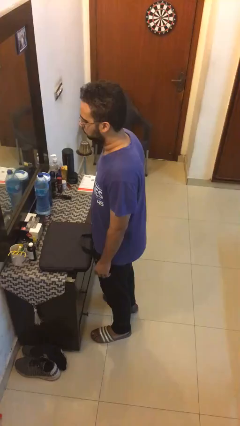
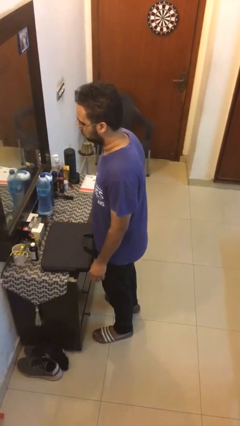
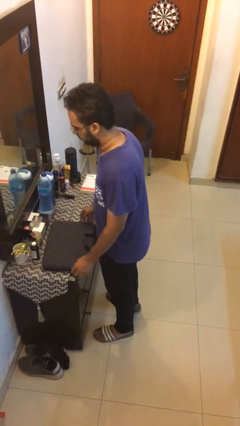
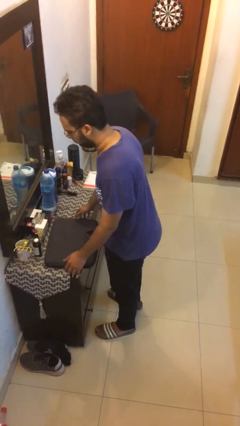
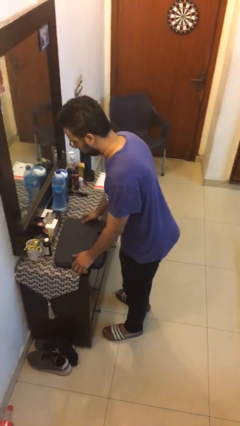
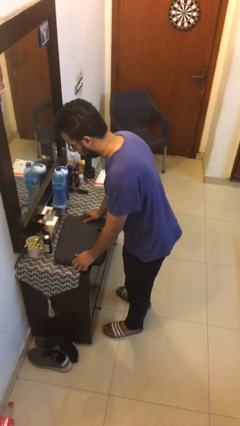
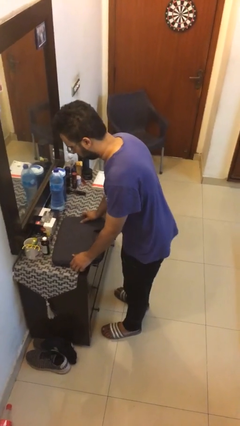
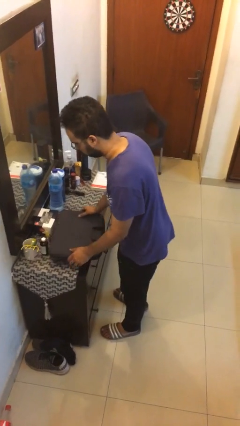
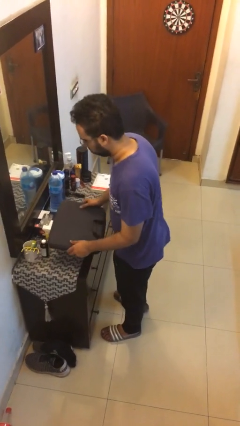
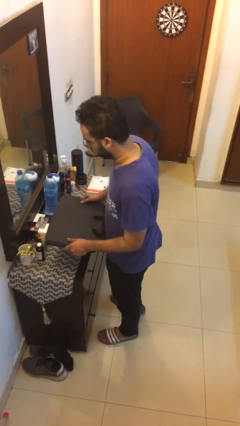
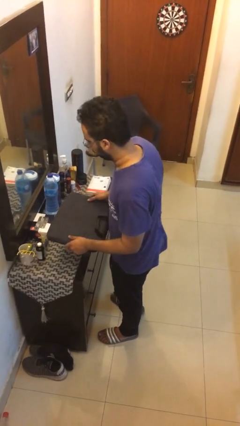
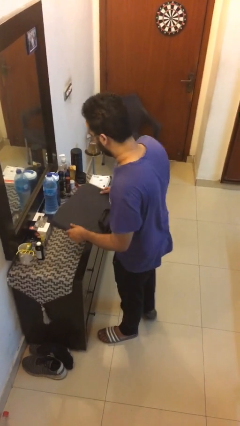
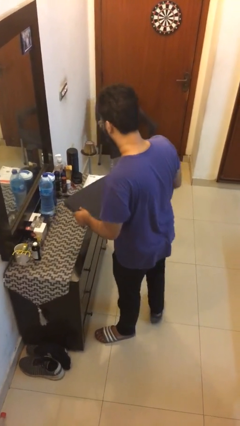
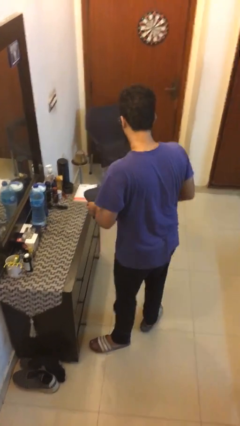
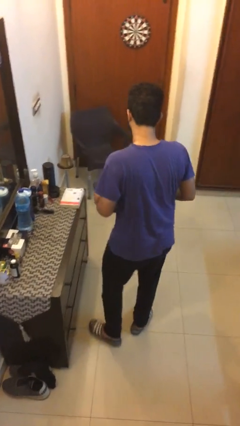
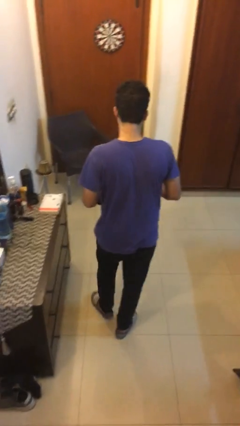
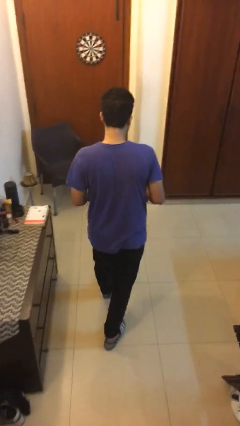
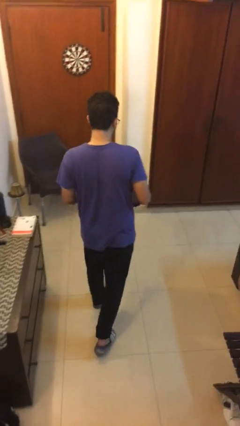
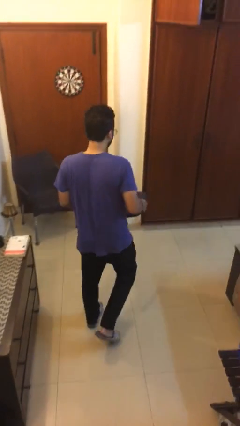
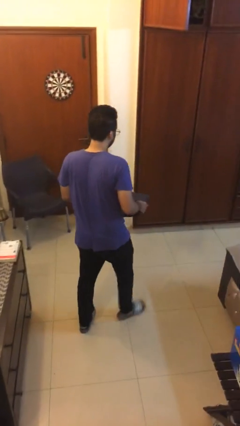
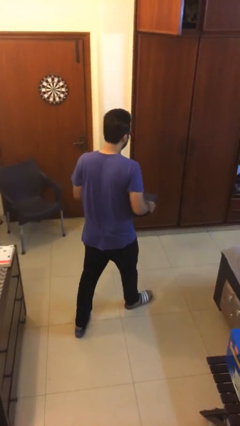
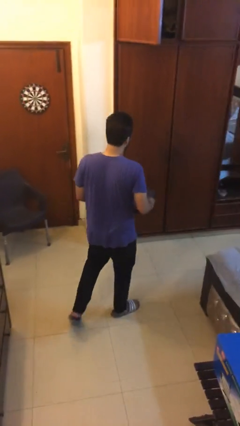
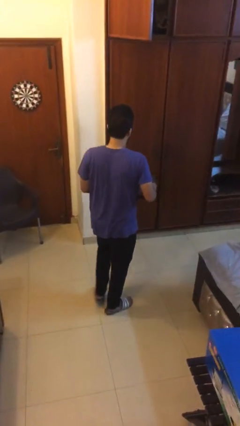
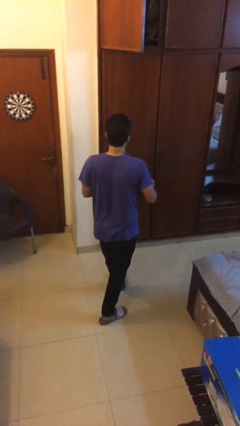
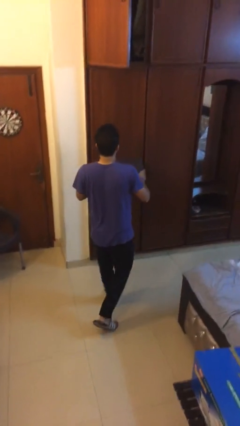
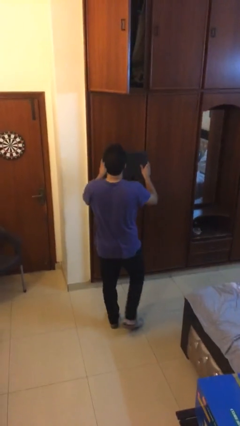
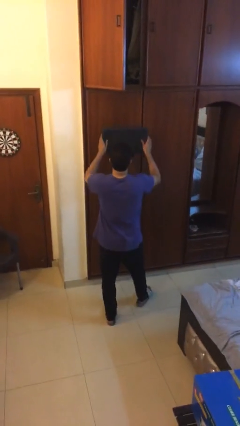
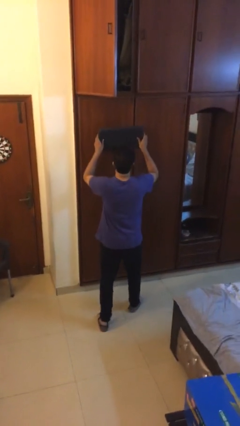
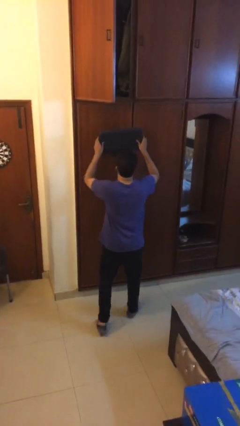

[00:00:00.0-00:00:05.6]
person picks up object from table

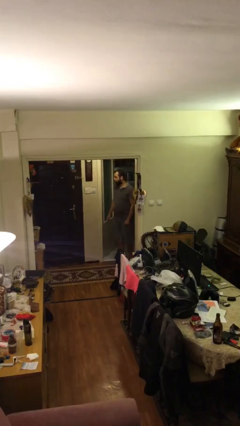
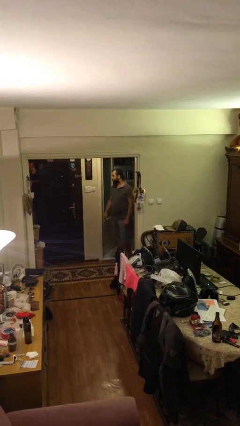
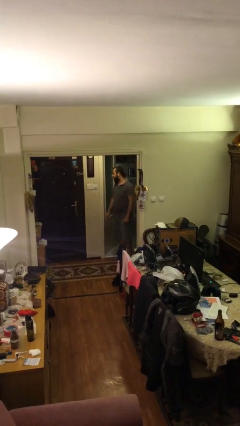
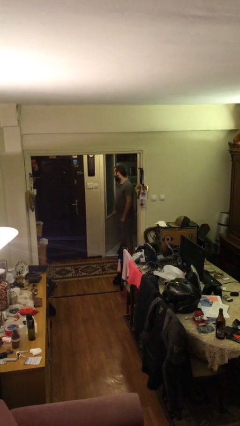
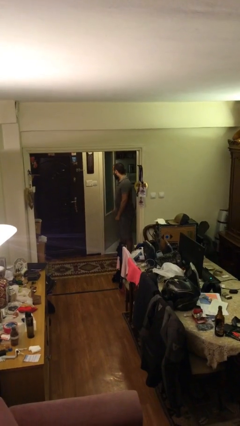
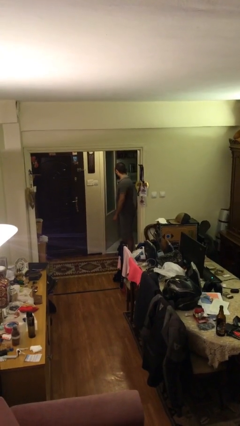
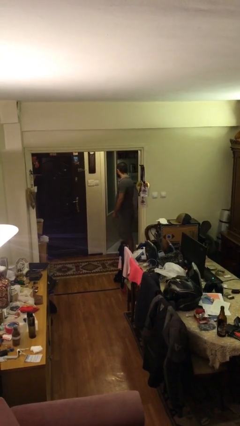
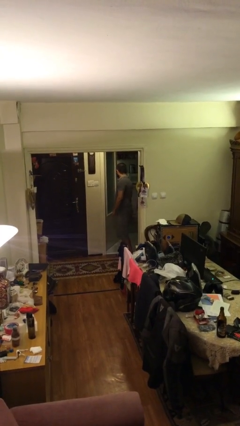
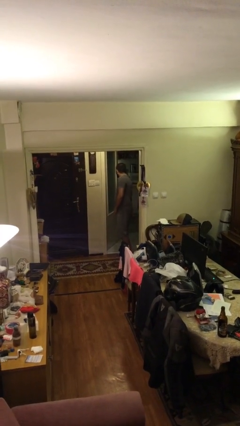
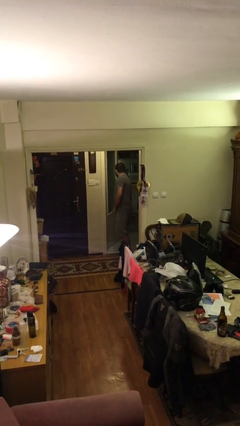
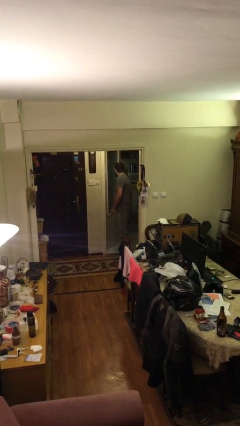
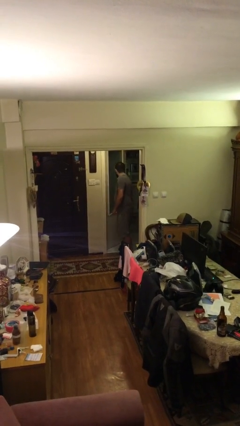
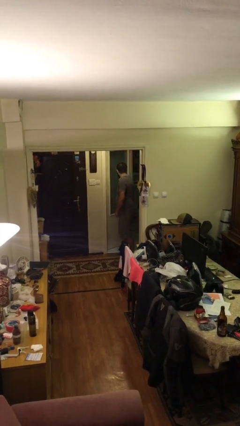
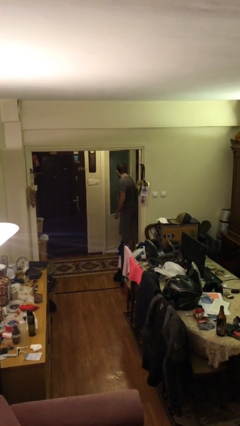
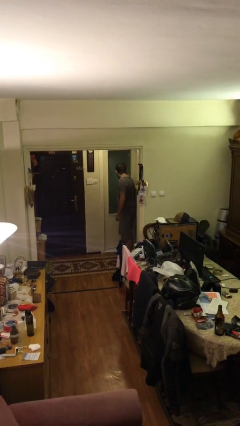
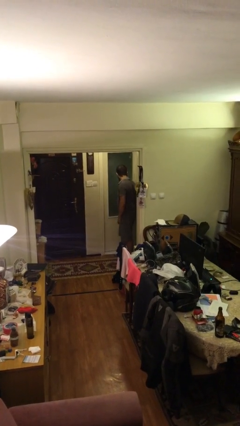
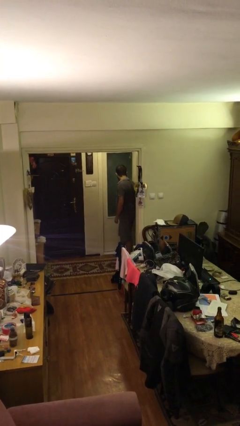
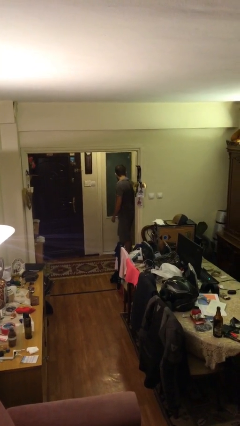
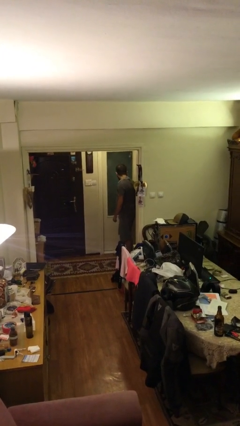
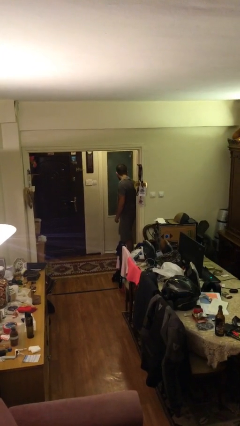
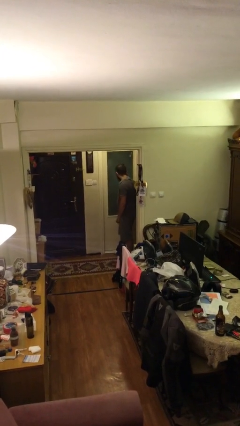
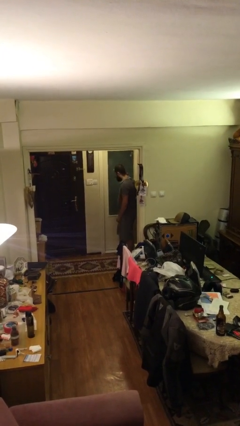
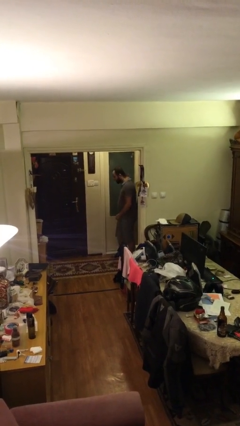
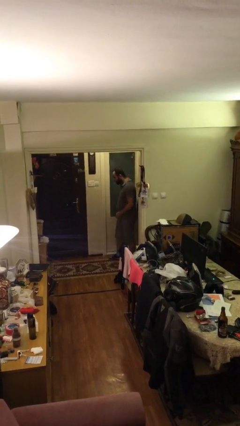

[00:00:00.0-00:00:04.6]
person closes facility door

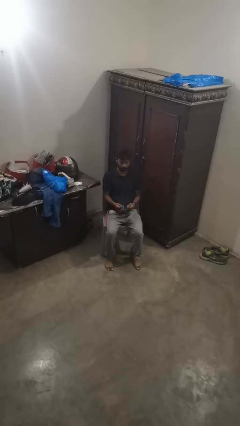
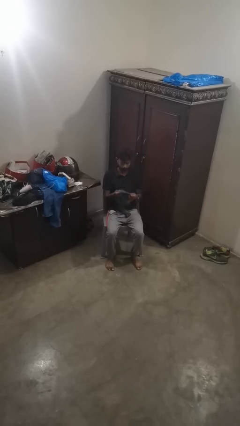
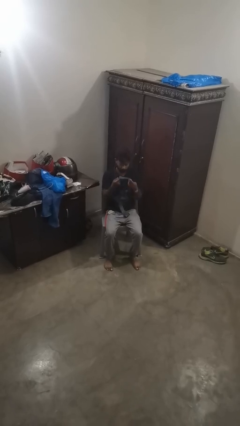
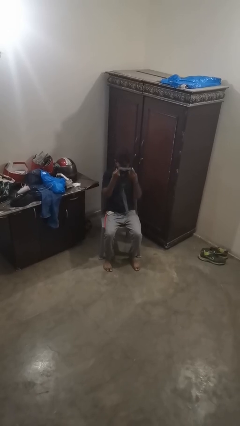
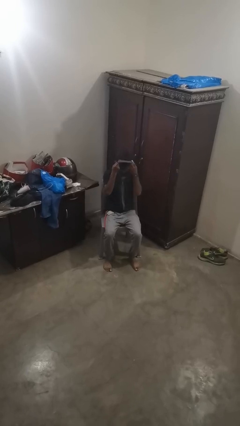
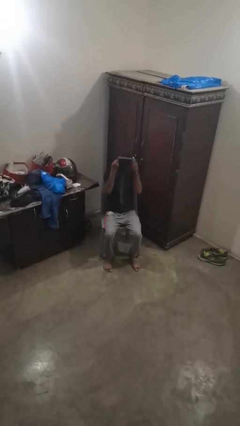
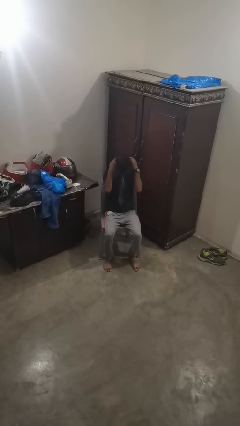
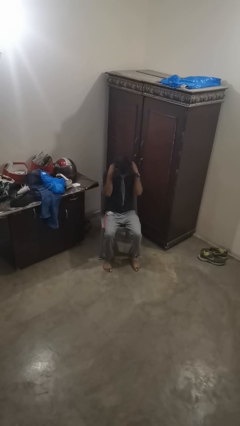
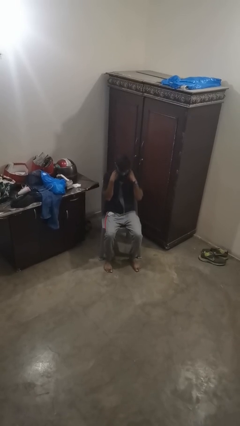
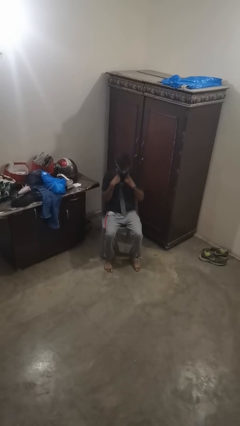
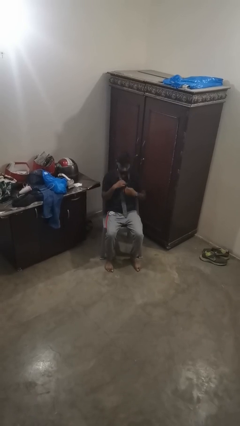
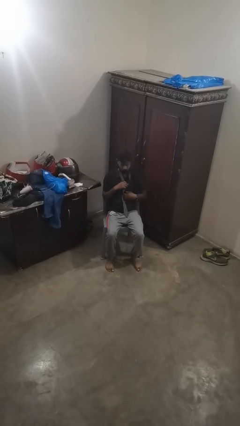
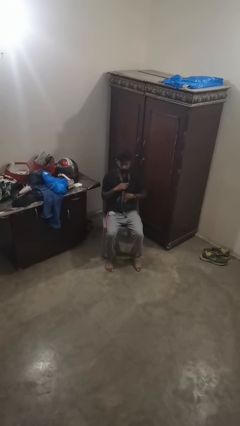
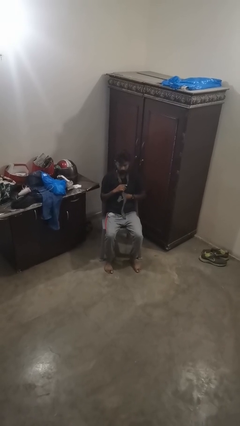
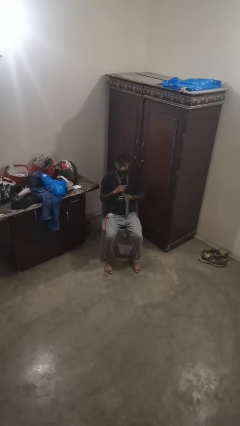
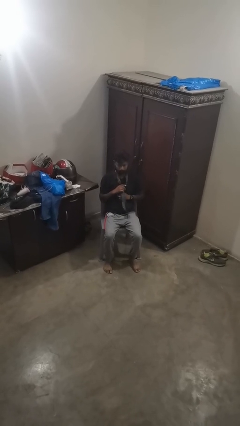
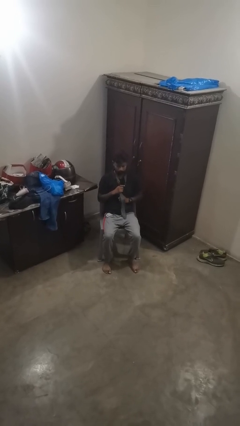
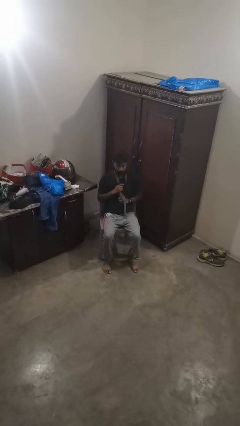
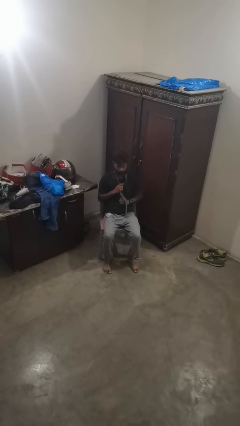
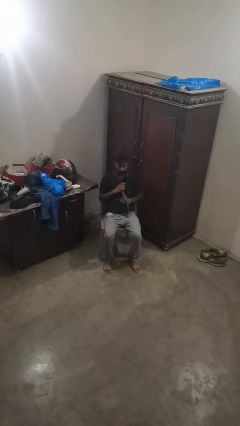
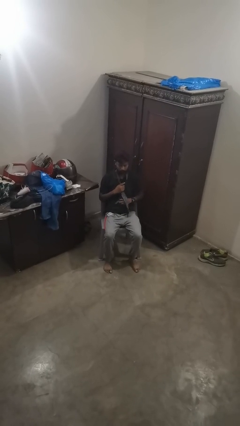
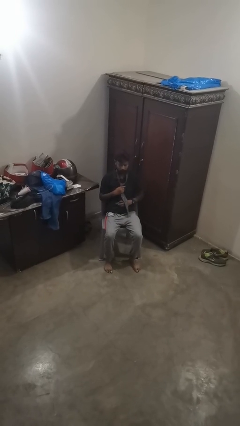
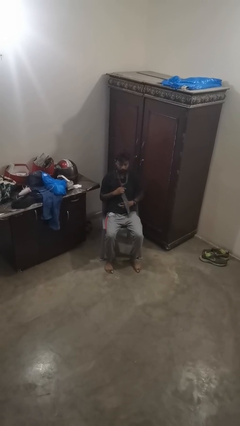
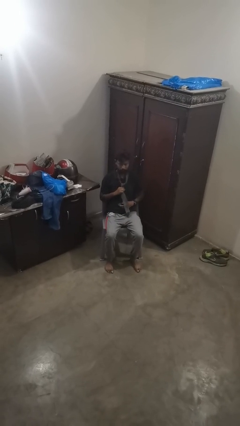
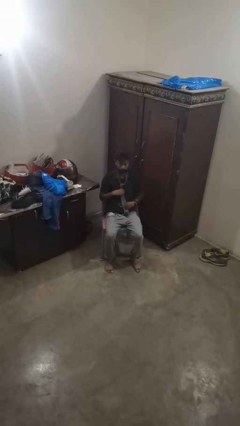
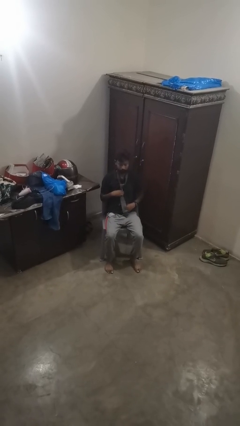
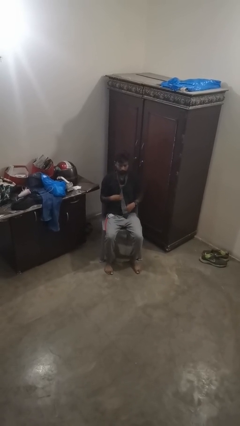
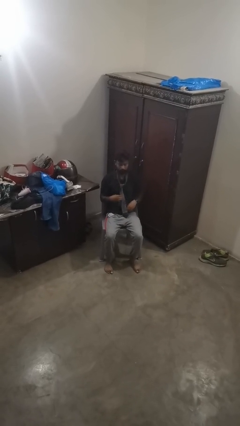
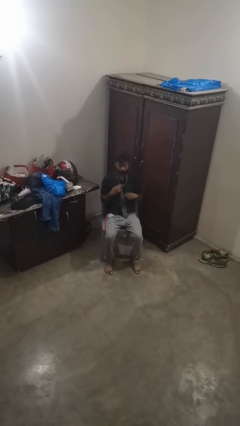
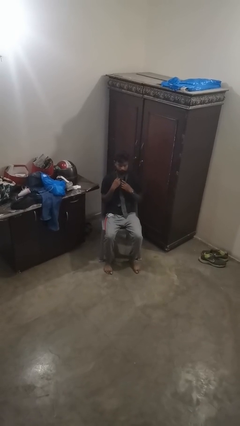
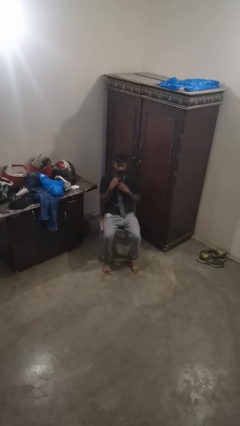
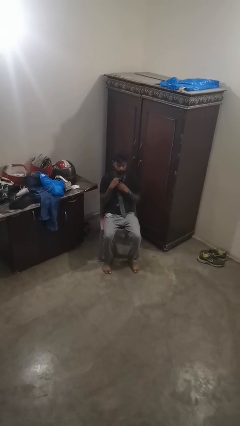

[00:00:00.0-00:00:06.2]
person puts on necktie

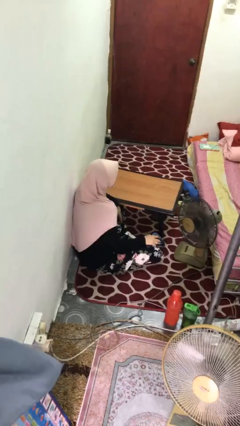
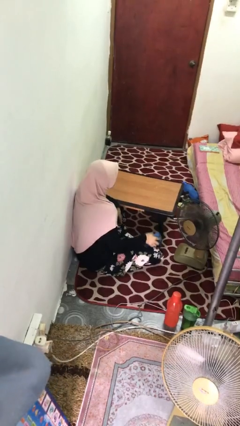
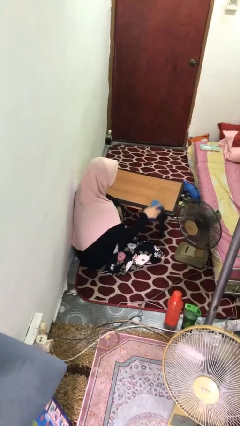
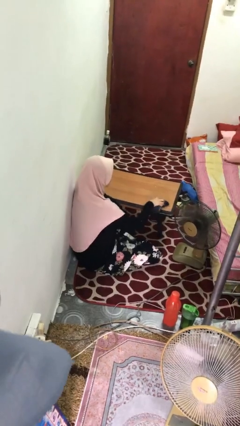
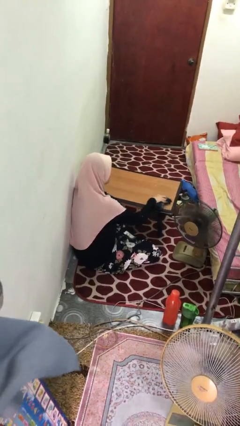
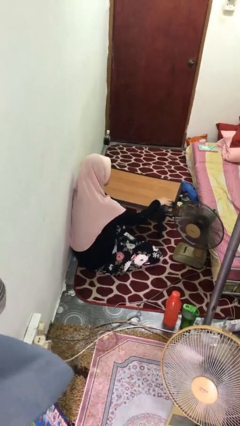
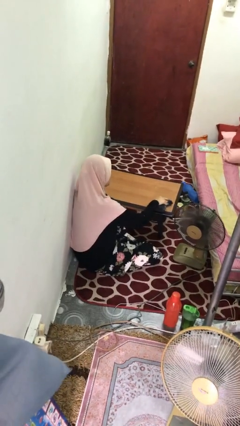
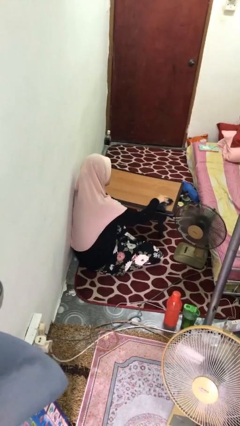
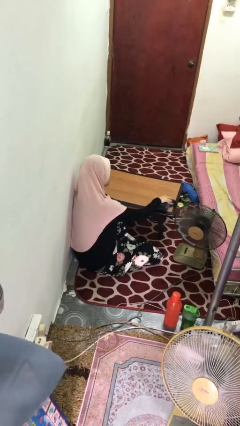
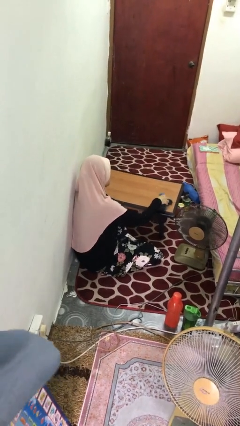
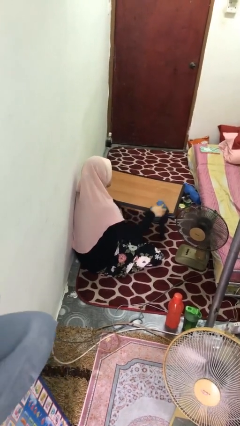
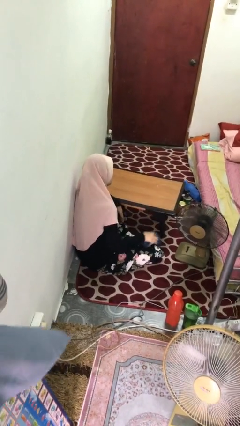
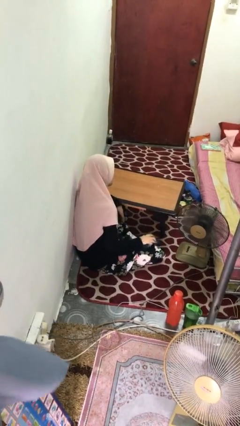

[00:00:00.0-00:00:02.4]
person cleans table with rag
